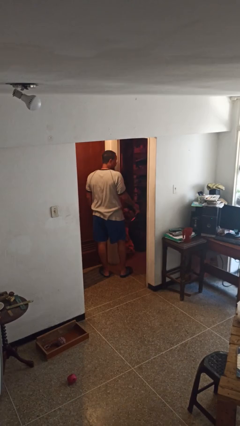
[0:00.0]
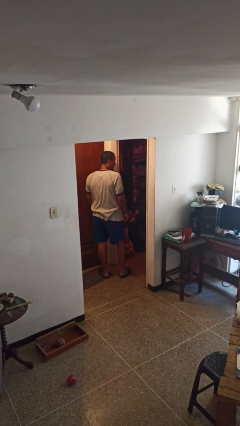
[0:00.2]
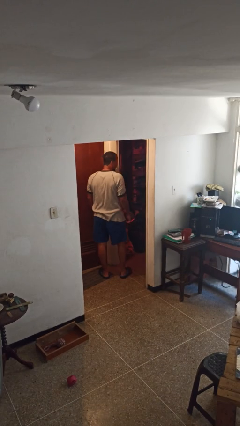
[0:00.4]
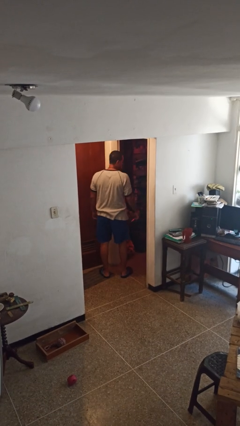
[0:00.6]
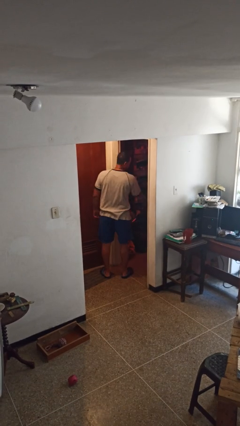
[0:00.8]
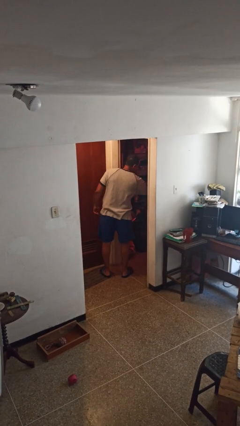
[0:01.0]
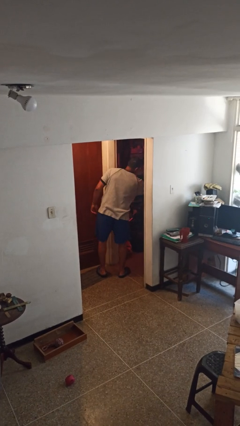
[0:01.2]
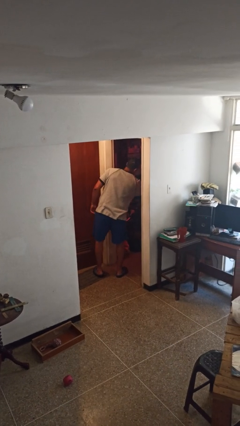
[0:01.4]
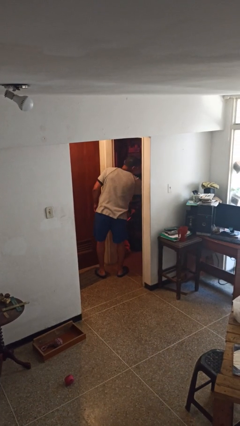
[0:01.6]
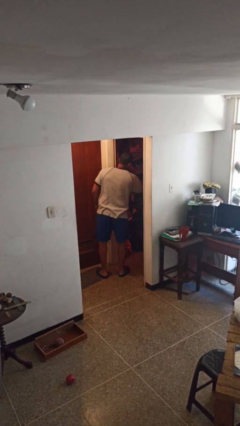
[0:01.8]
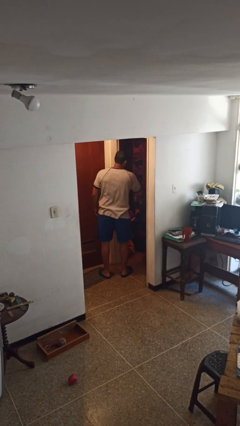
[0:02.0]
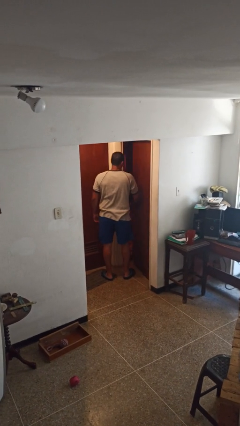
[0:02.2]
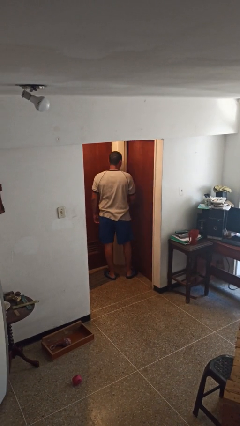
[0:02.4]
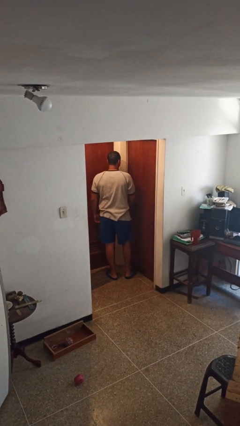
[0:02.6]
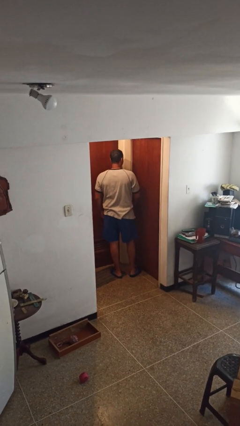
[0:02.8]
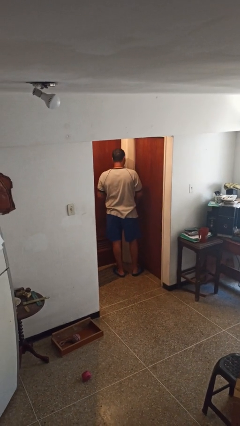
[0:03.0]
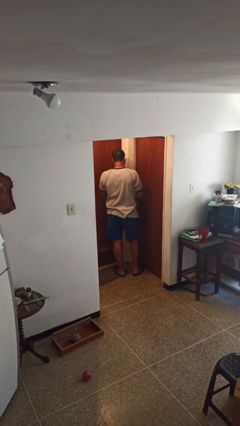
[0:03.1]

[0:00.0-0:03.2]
person closes facility door

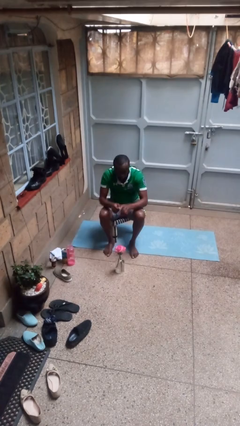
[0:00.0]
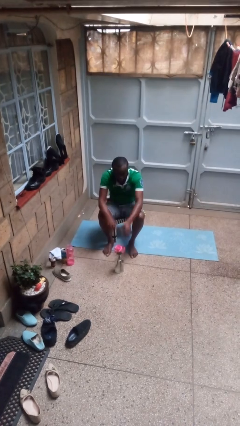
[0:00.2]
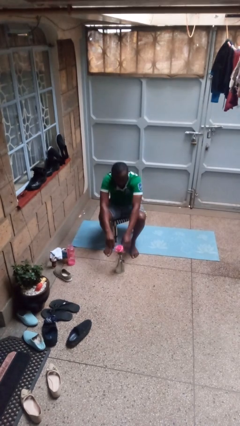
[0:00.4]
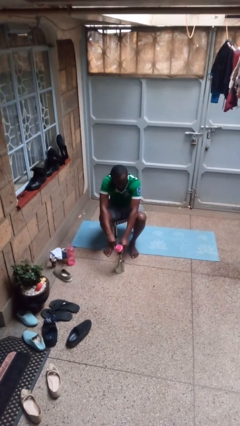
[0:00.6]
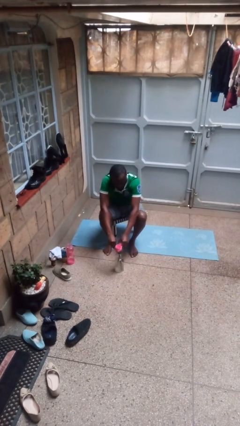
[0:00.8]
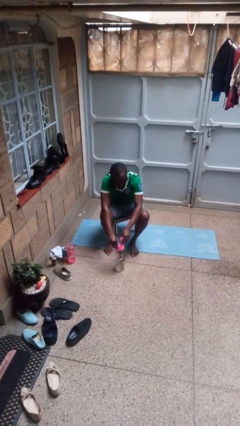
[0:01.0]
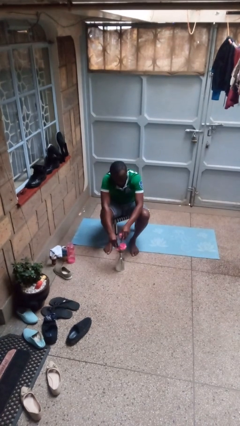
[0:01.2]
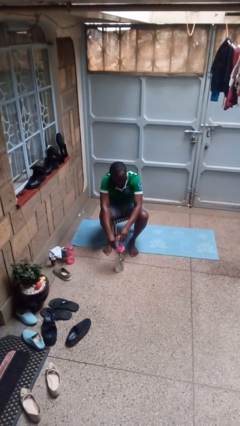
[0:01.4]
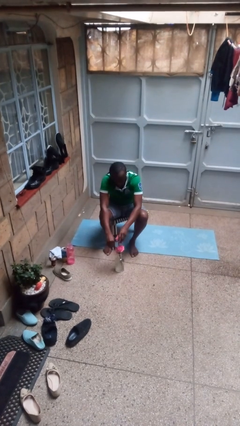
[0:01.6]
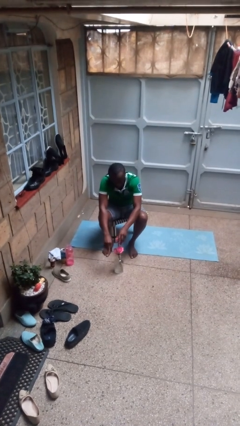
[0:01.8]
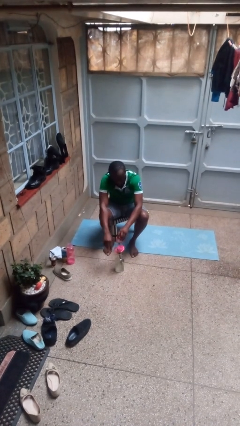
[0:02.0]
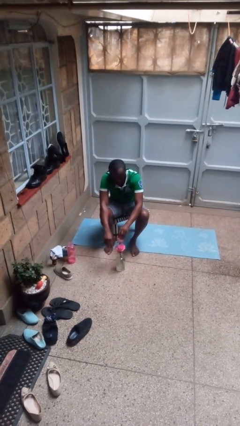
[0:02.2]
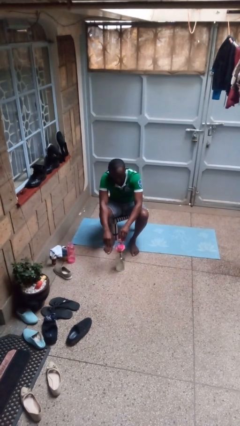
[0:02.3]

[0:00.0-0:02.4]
person arranges flowers in vase

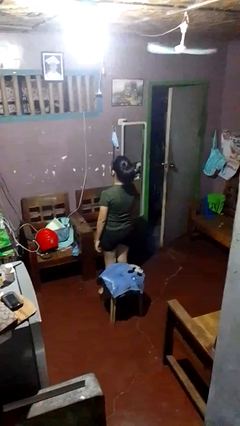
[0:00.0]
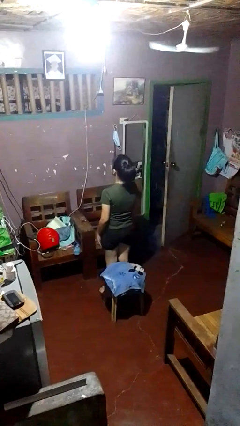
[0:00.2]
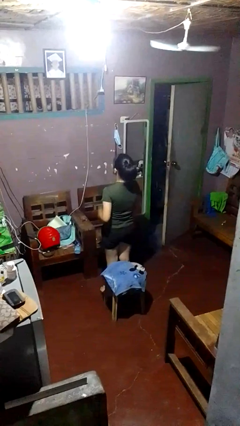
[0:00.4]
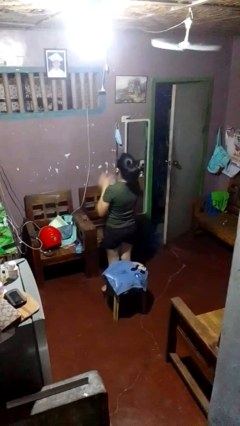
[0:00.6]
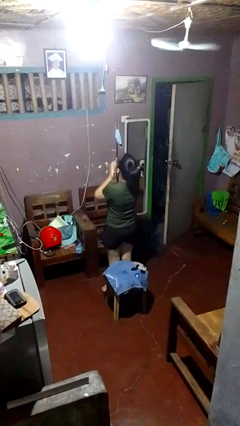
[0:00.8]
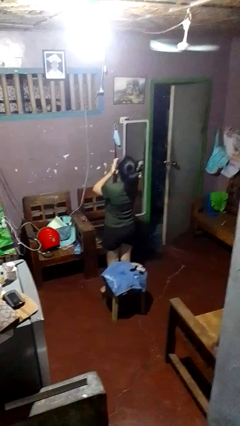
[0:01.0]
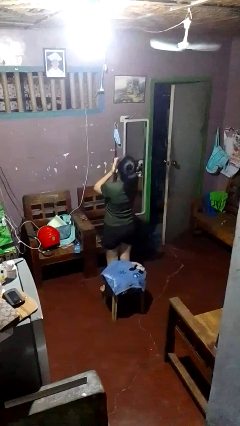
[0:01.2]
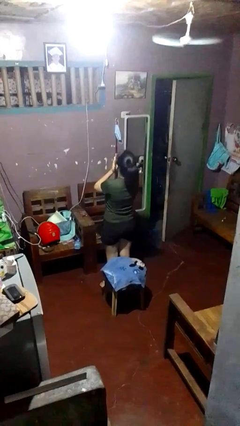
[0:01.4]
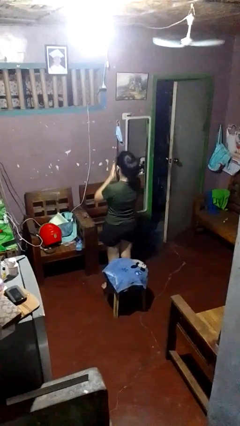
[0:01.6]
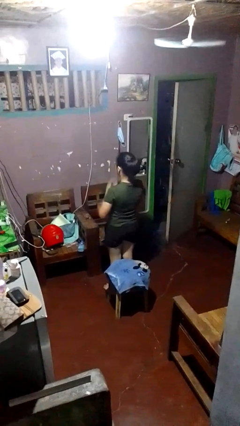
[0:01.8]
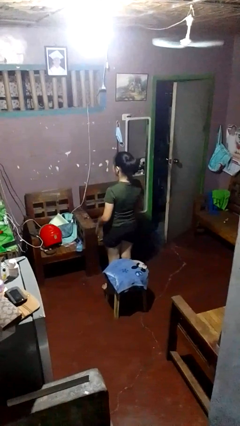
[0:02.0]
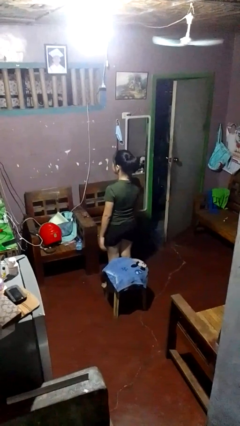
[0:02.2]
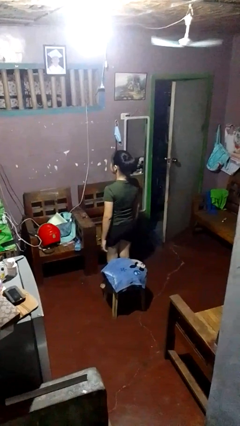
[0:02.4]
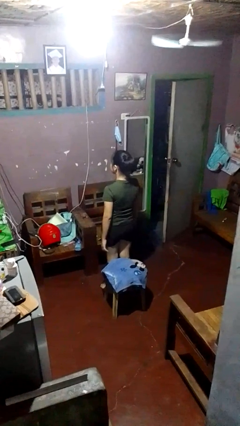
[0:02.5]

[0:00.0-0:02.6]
person yawns

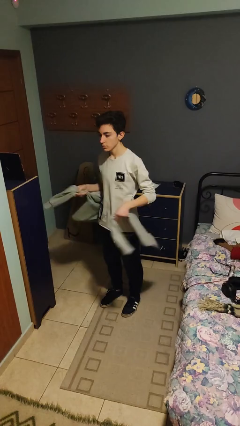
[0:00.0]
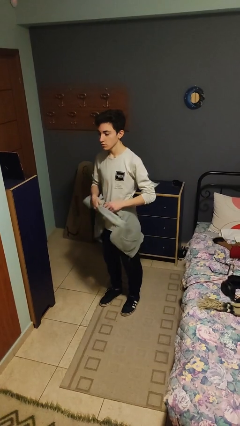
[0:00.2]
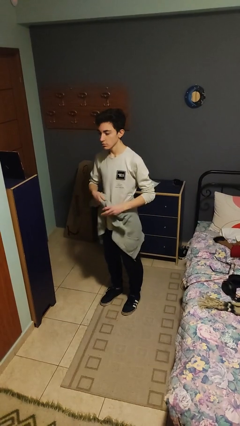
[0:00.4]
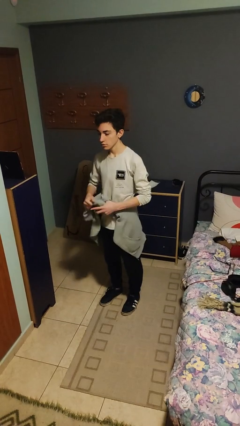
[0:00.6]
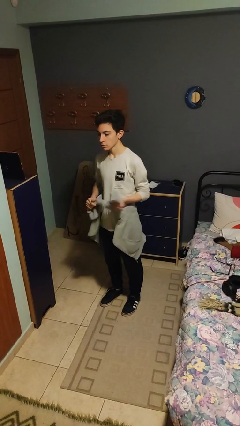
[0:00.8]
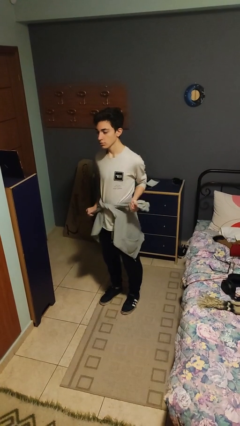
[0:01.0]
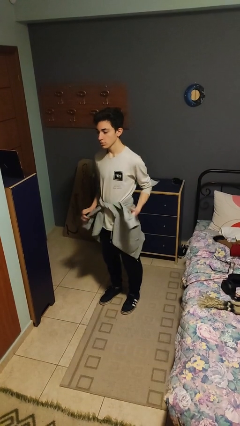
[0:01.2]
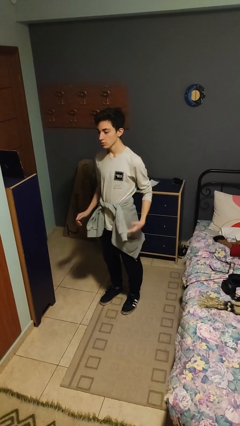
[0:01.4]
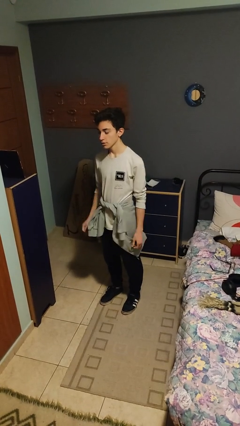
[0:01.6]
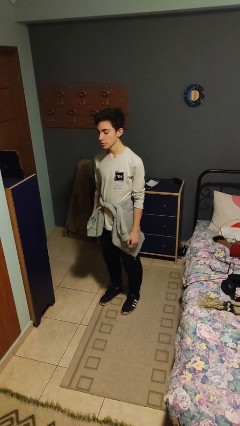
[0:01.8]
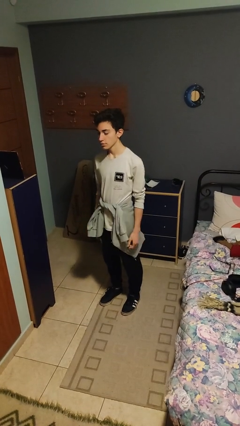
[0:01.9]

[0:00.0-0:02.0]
person ties jacket around waist

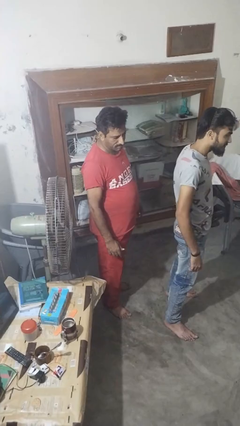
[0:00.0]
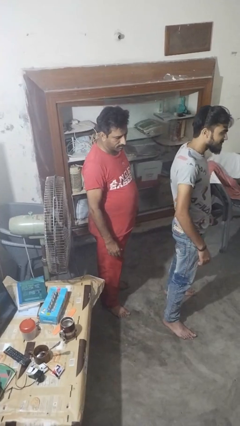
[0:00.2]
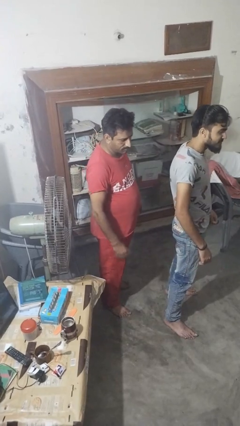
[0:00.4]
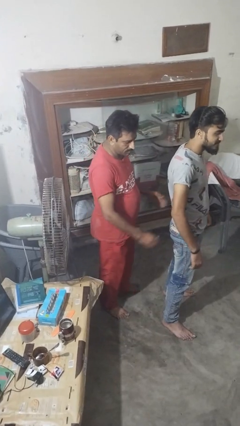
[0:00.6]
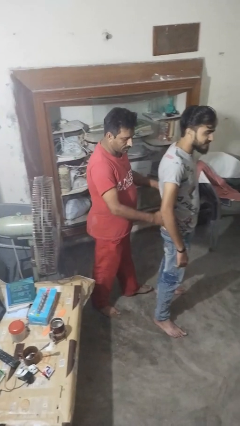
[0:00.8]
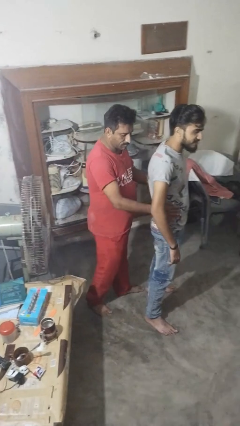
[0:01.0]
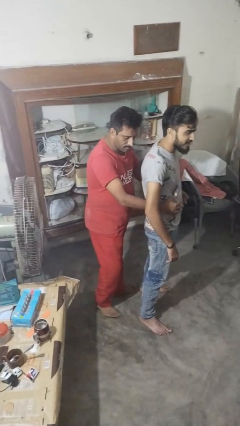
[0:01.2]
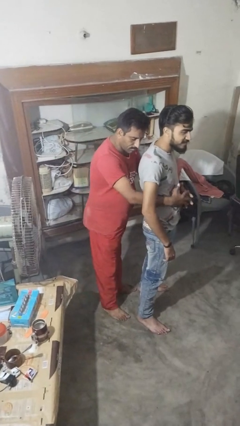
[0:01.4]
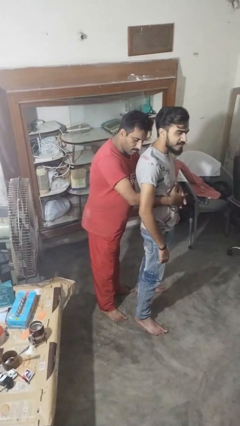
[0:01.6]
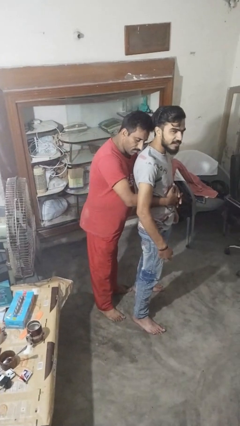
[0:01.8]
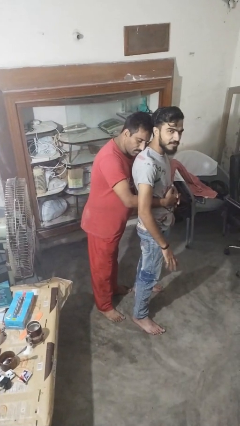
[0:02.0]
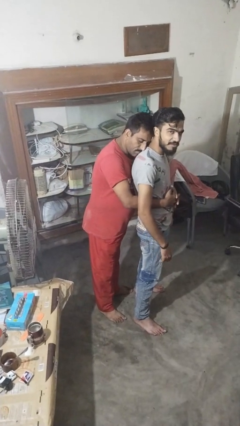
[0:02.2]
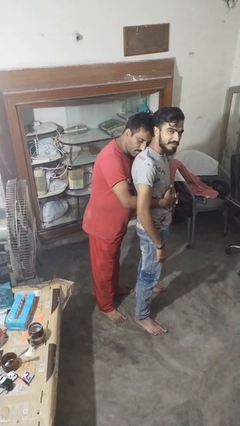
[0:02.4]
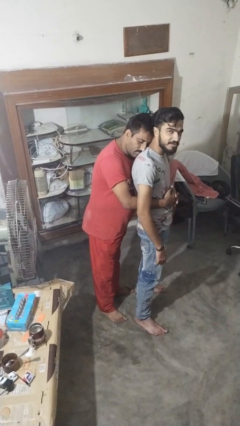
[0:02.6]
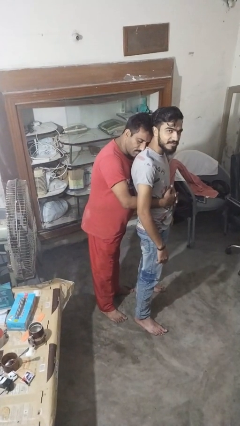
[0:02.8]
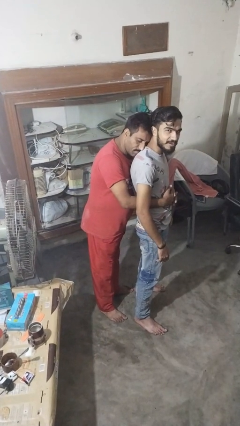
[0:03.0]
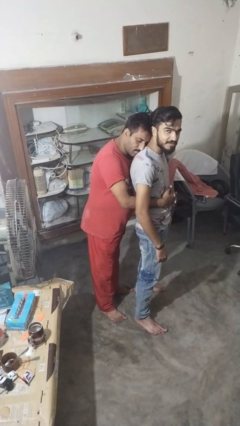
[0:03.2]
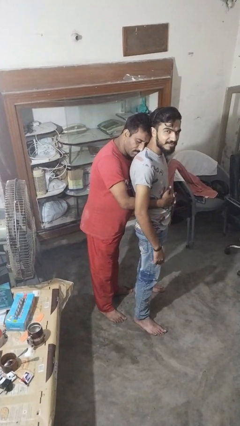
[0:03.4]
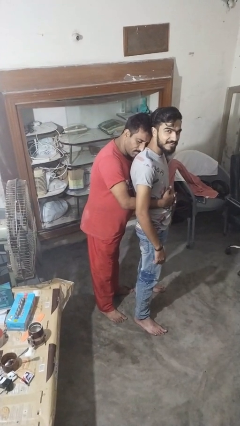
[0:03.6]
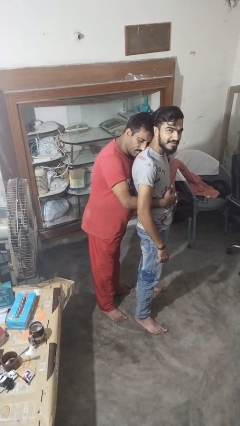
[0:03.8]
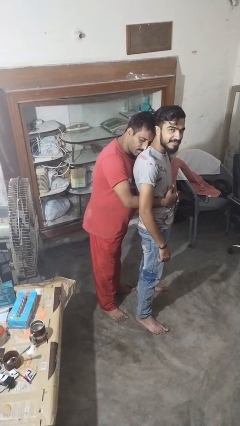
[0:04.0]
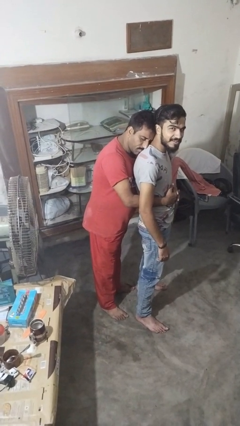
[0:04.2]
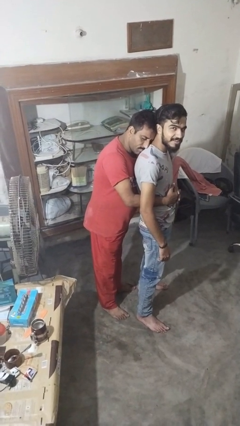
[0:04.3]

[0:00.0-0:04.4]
person hugs person from behind

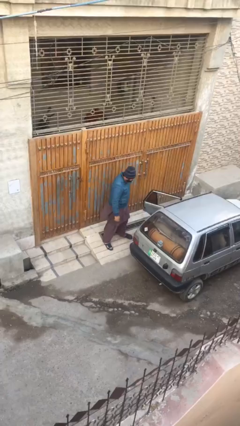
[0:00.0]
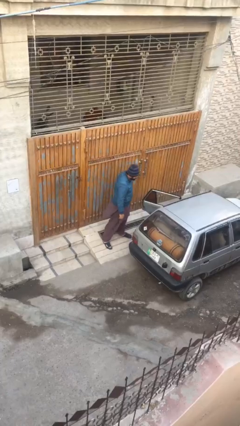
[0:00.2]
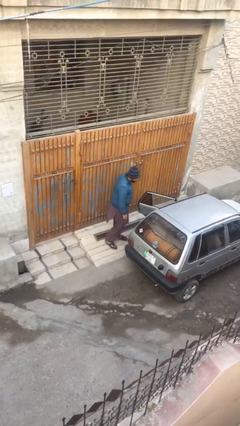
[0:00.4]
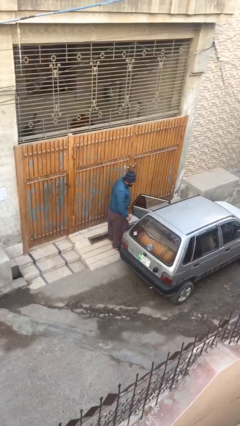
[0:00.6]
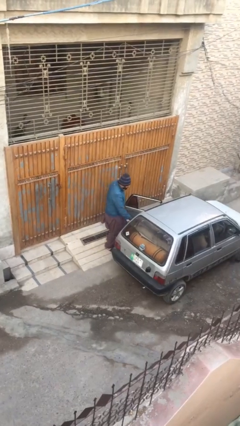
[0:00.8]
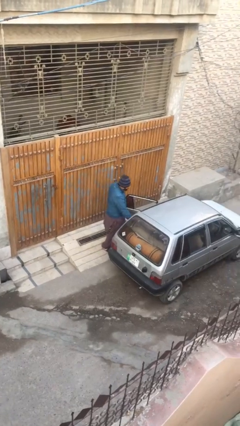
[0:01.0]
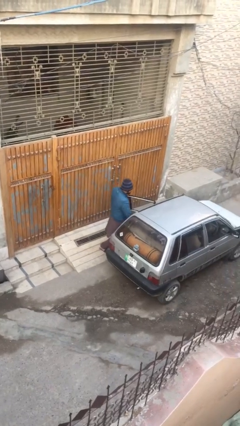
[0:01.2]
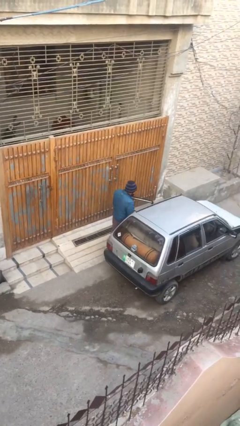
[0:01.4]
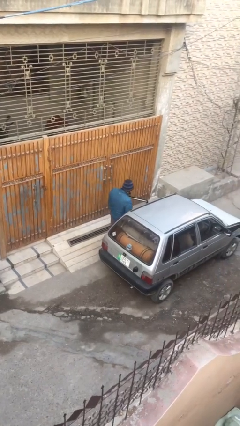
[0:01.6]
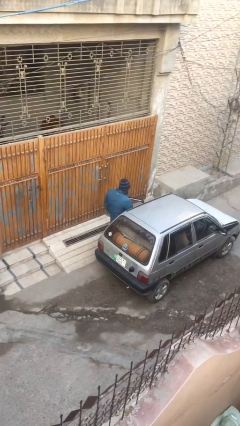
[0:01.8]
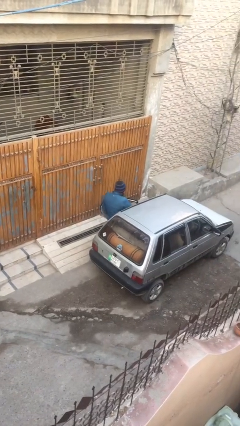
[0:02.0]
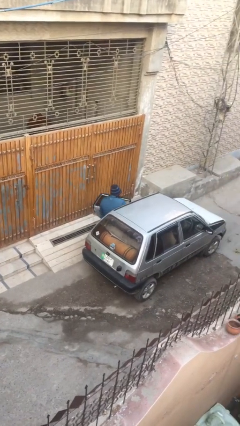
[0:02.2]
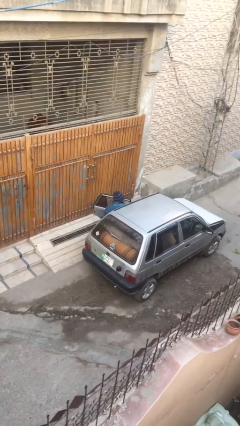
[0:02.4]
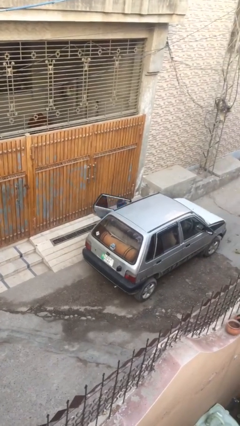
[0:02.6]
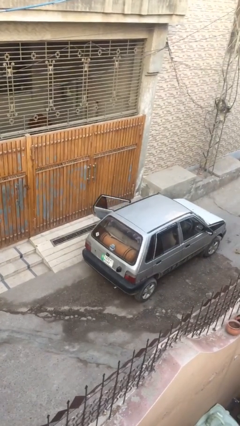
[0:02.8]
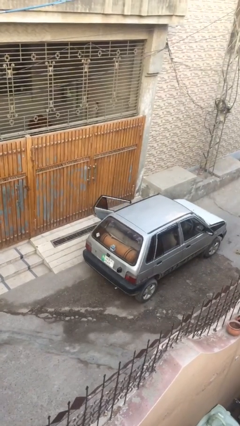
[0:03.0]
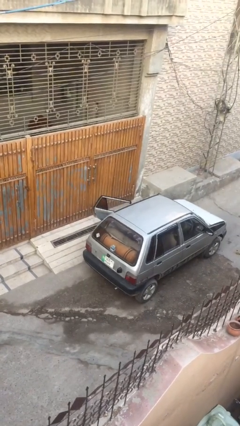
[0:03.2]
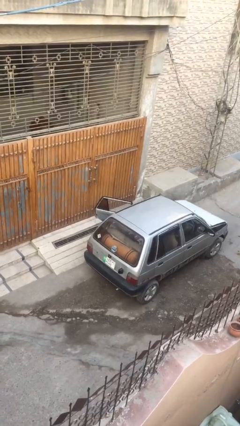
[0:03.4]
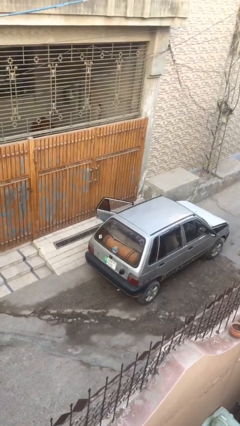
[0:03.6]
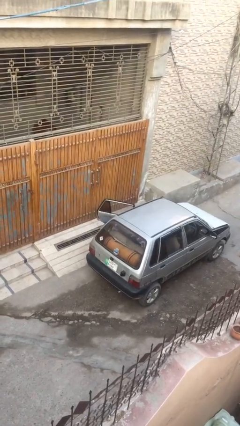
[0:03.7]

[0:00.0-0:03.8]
person enters car
